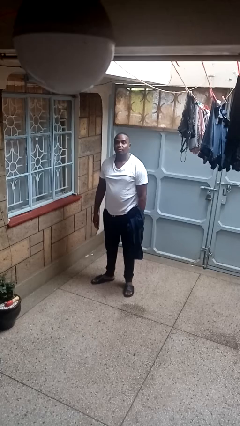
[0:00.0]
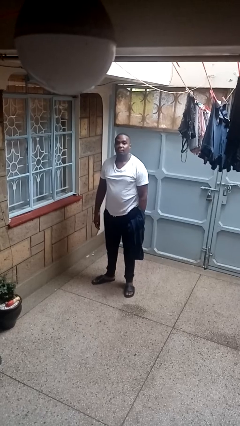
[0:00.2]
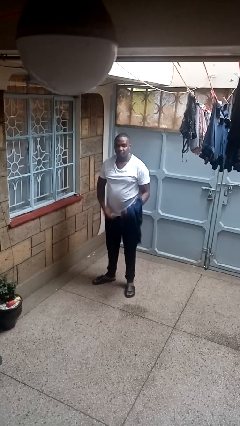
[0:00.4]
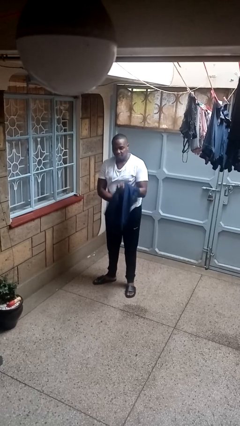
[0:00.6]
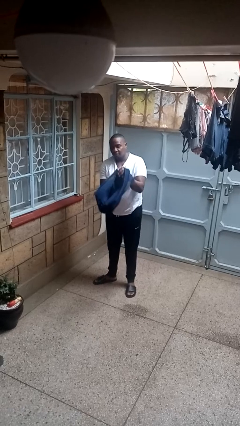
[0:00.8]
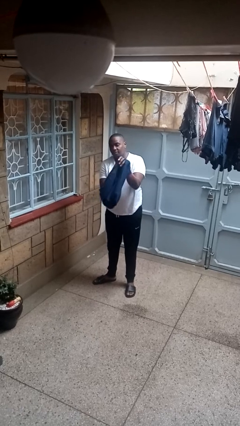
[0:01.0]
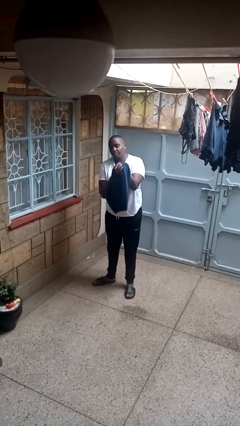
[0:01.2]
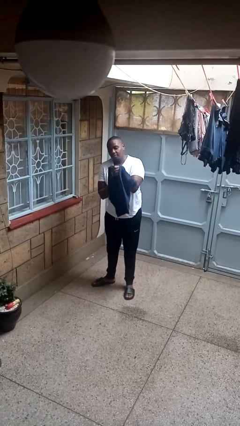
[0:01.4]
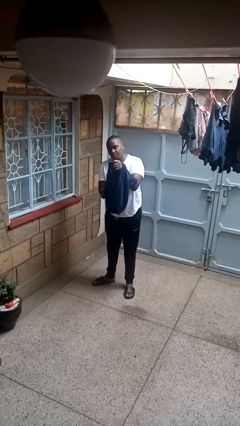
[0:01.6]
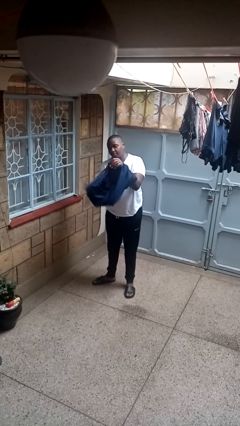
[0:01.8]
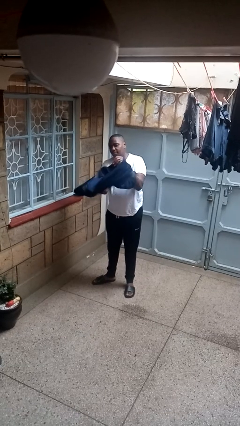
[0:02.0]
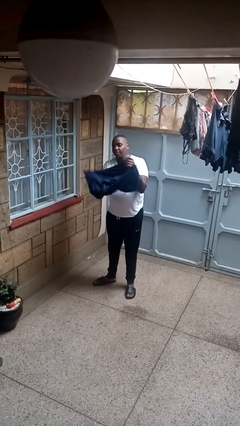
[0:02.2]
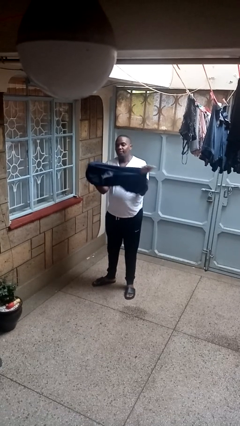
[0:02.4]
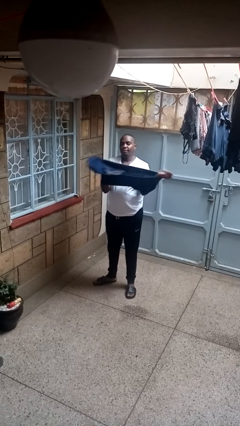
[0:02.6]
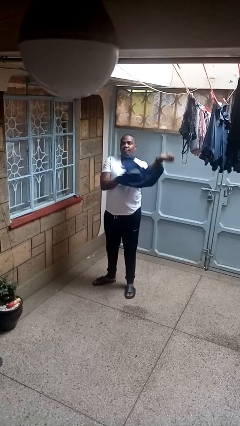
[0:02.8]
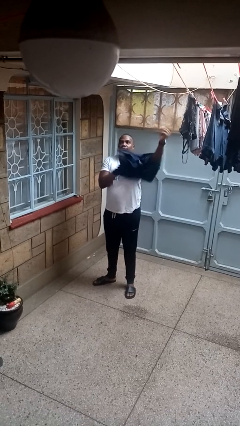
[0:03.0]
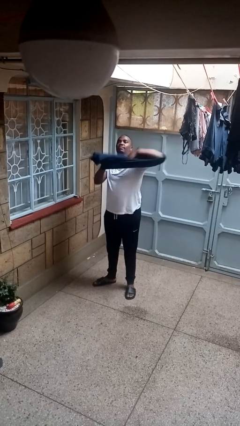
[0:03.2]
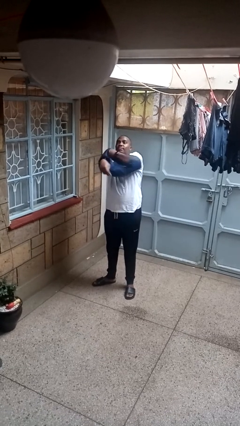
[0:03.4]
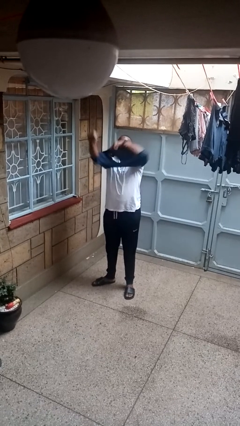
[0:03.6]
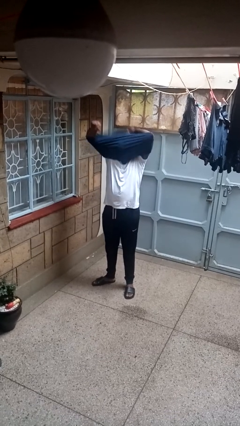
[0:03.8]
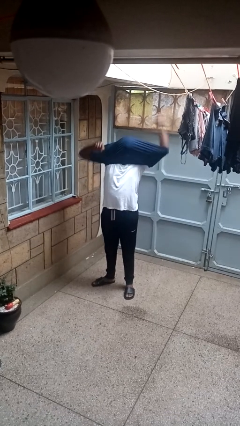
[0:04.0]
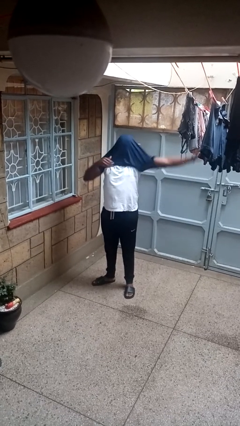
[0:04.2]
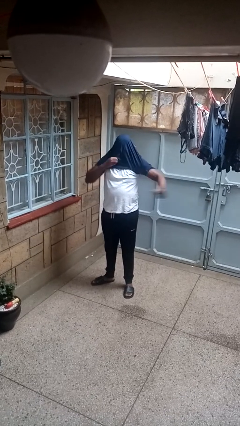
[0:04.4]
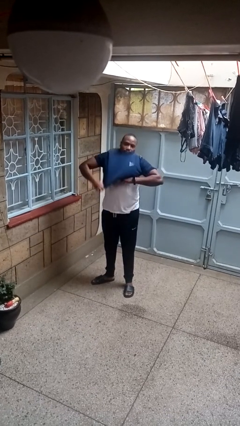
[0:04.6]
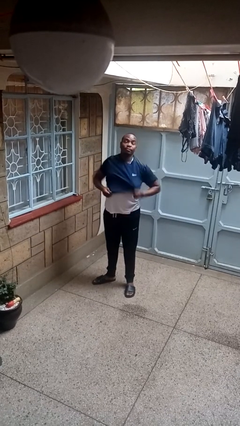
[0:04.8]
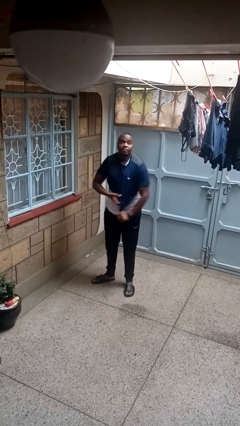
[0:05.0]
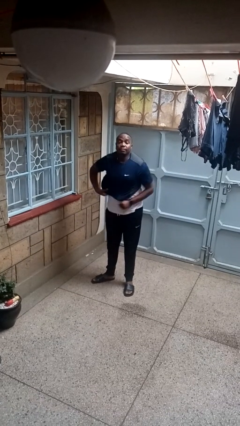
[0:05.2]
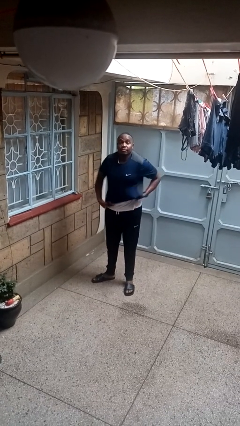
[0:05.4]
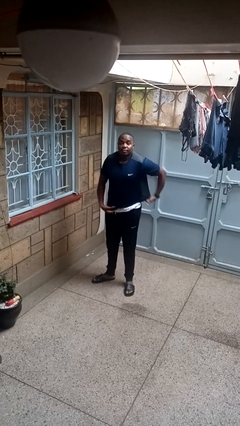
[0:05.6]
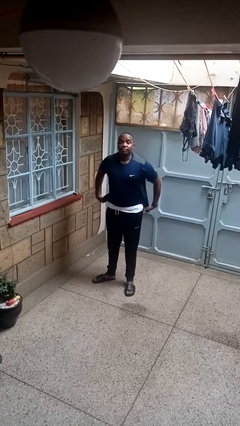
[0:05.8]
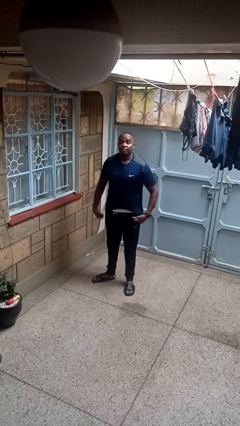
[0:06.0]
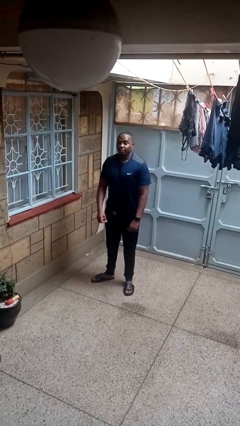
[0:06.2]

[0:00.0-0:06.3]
person puts on shirt

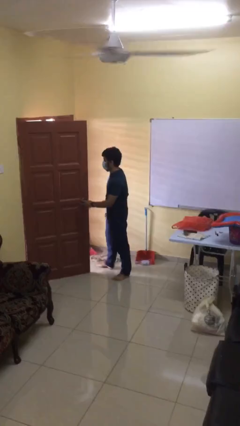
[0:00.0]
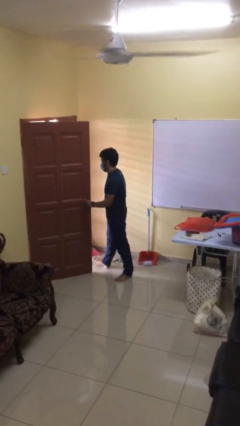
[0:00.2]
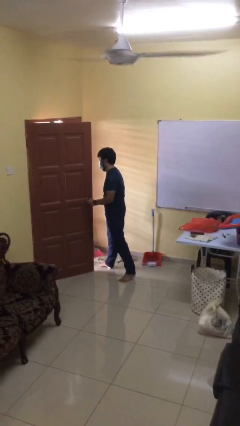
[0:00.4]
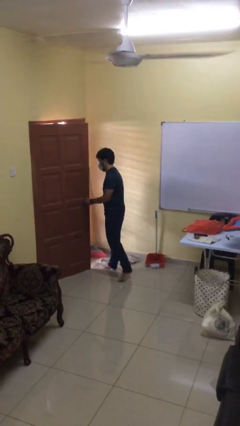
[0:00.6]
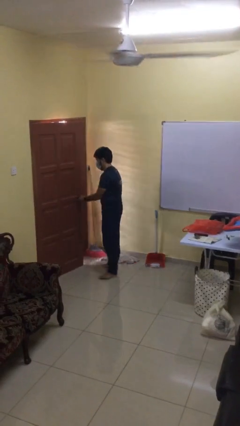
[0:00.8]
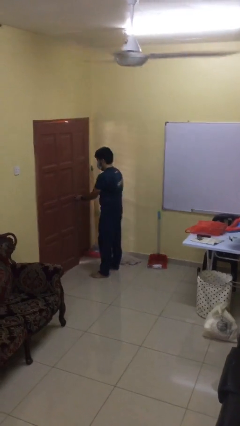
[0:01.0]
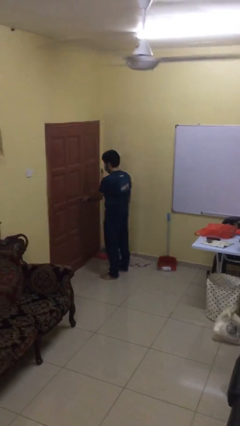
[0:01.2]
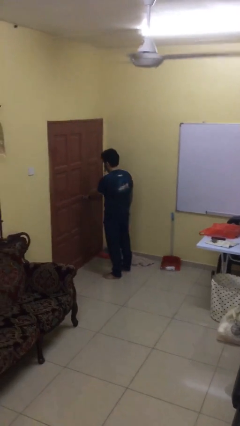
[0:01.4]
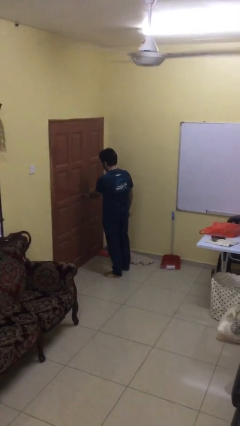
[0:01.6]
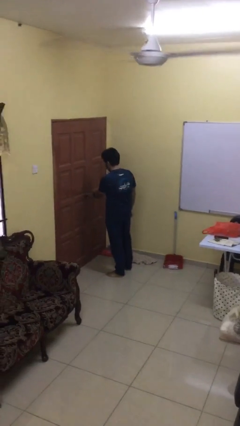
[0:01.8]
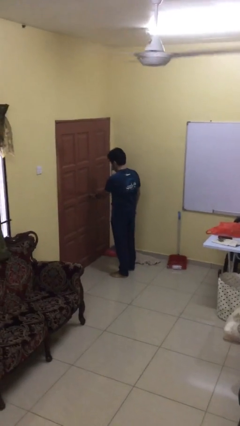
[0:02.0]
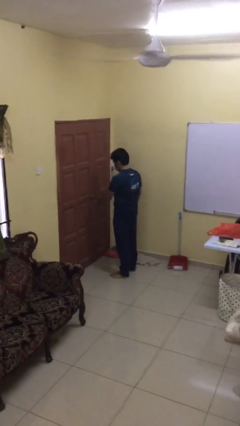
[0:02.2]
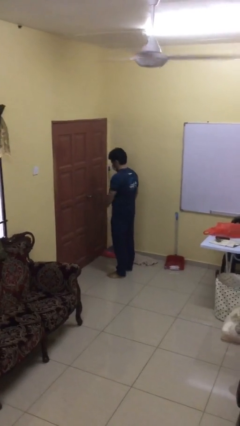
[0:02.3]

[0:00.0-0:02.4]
person closes facility door

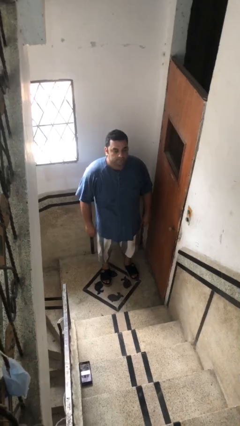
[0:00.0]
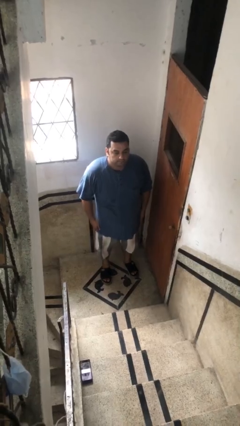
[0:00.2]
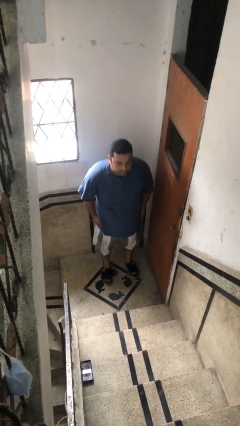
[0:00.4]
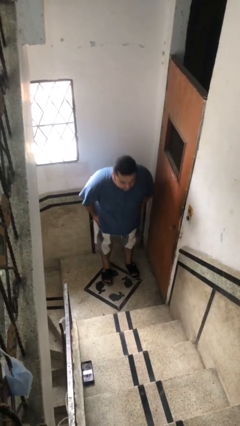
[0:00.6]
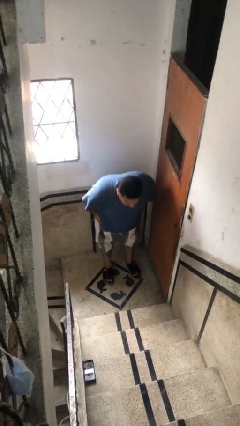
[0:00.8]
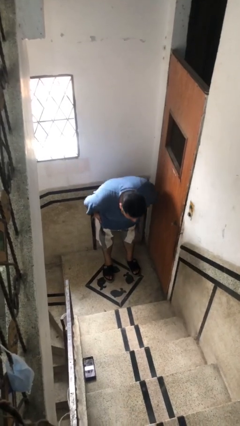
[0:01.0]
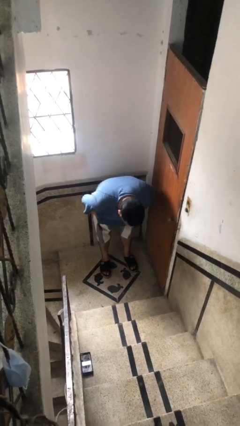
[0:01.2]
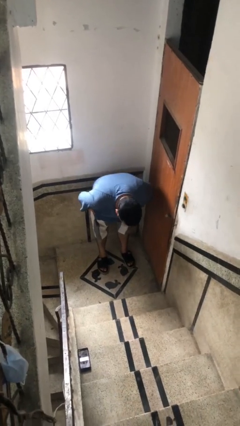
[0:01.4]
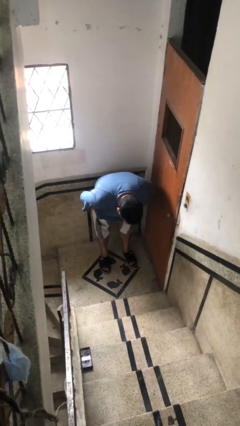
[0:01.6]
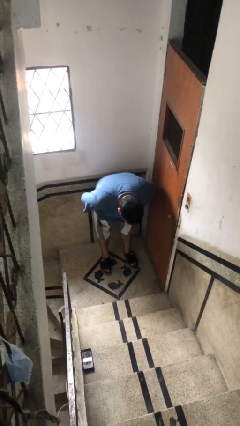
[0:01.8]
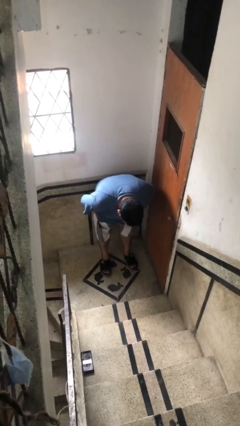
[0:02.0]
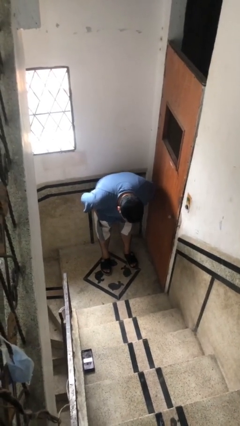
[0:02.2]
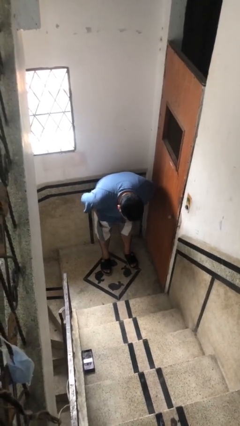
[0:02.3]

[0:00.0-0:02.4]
person bows

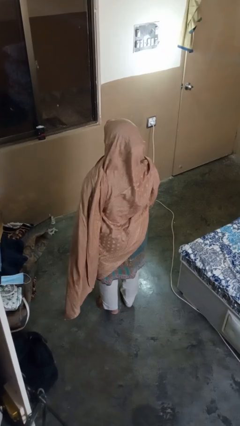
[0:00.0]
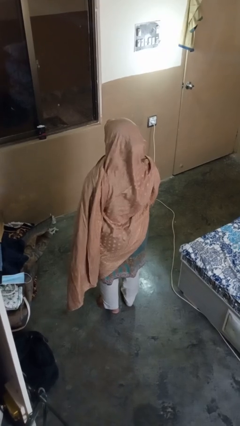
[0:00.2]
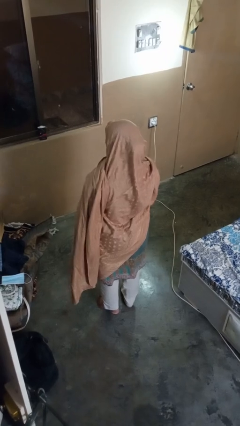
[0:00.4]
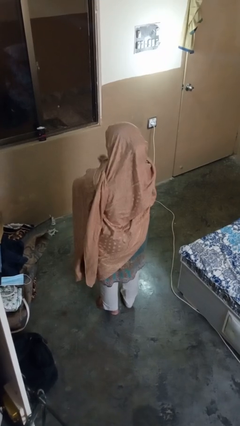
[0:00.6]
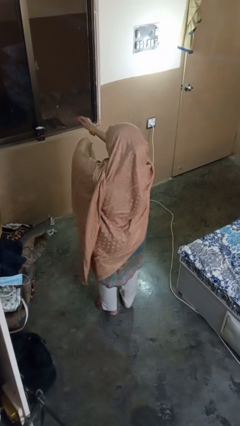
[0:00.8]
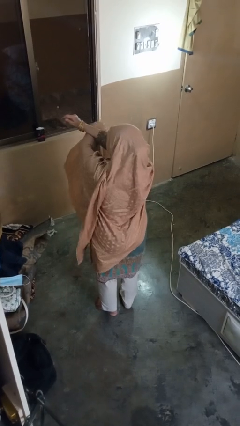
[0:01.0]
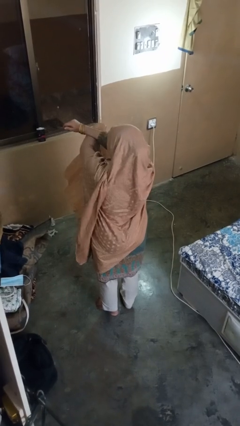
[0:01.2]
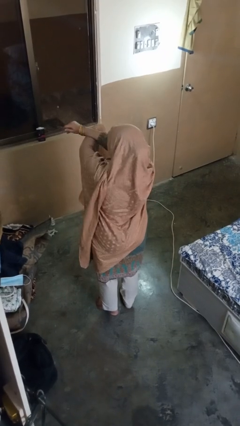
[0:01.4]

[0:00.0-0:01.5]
person crosses arms

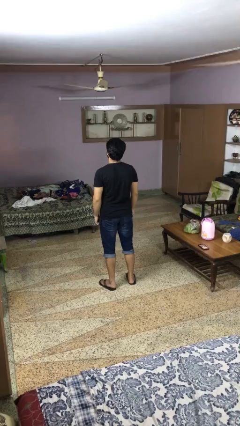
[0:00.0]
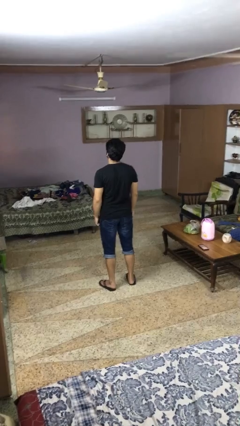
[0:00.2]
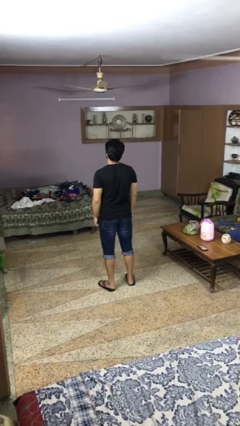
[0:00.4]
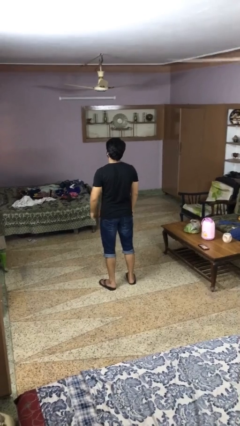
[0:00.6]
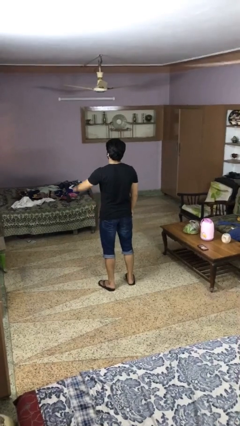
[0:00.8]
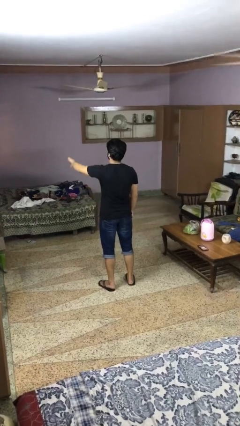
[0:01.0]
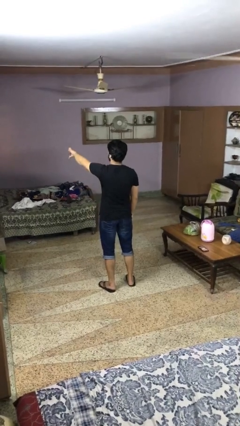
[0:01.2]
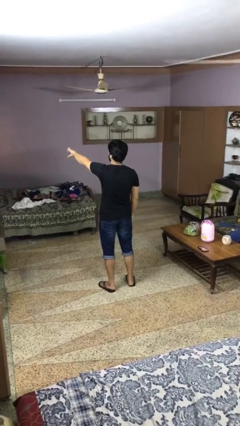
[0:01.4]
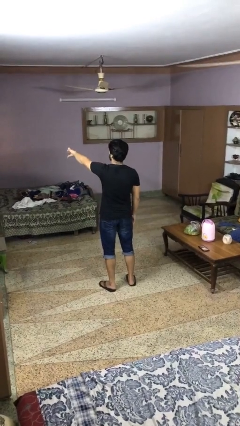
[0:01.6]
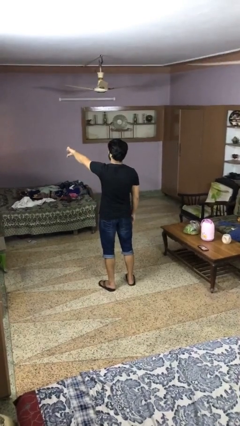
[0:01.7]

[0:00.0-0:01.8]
person gestures thumbs down

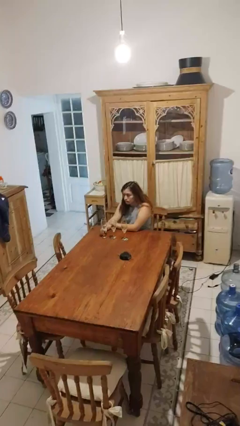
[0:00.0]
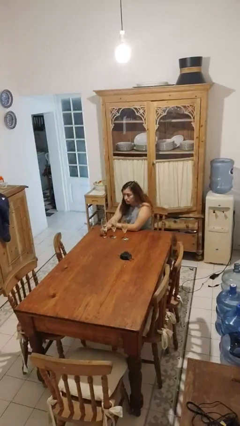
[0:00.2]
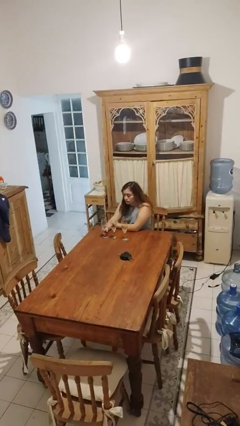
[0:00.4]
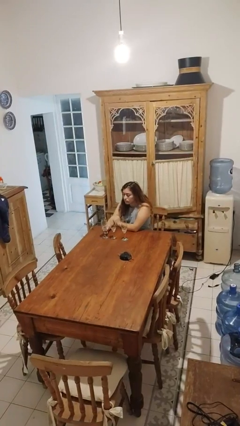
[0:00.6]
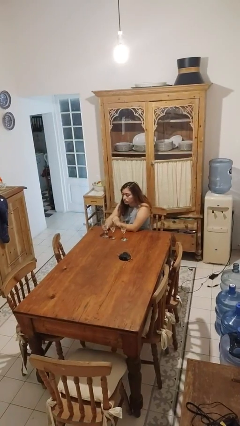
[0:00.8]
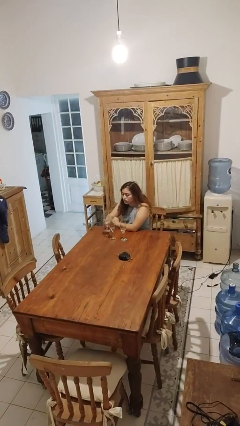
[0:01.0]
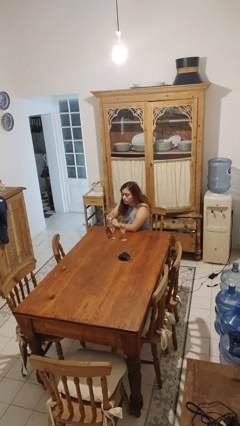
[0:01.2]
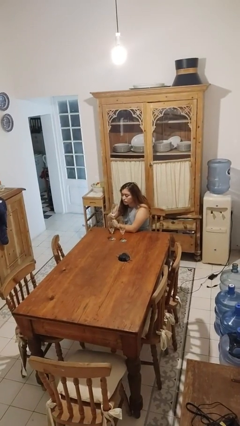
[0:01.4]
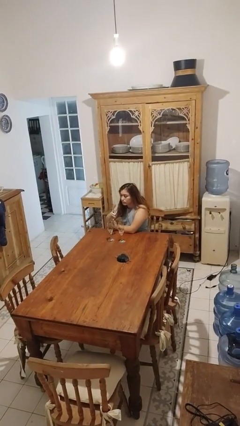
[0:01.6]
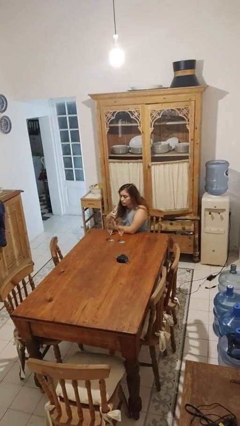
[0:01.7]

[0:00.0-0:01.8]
person picks up object from table

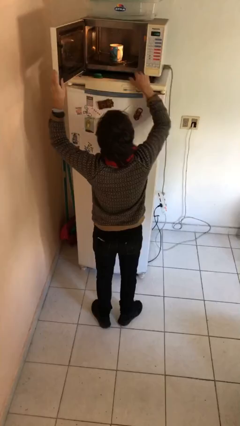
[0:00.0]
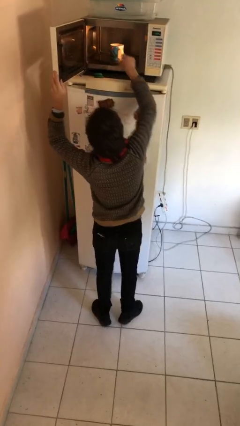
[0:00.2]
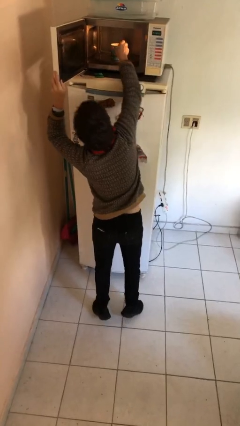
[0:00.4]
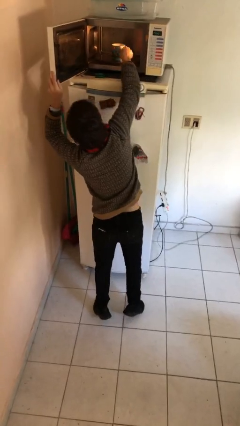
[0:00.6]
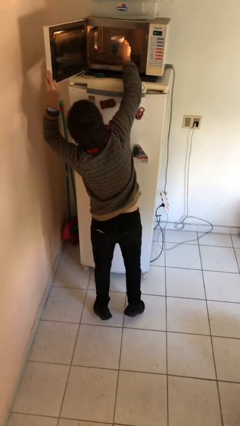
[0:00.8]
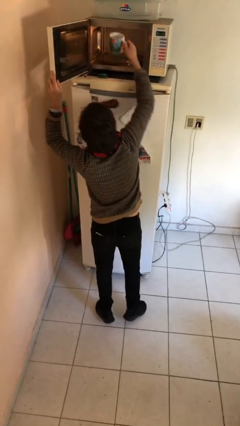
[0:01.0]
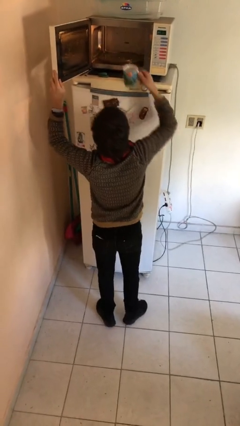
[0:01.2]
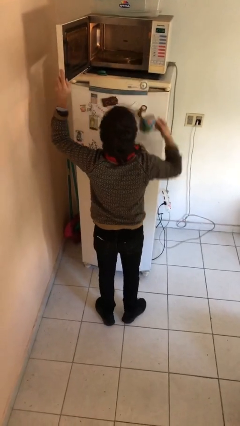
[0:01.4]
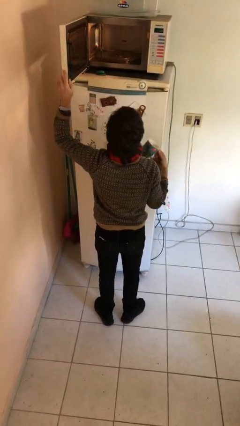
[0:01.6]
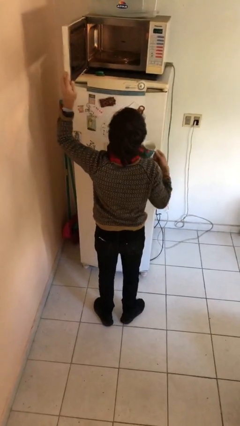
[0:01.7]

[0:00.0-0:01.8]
person takes object from microwave
